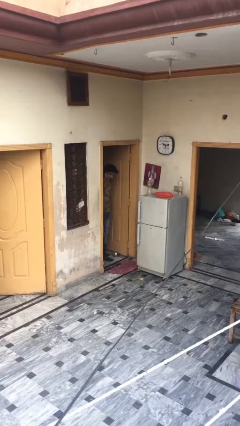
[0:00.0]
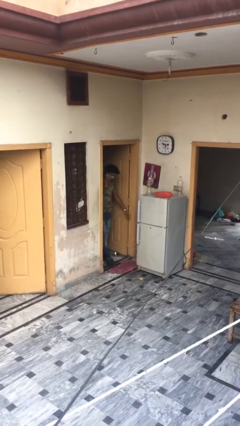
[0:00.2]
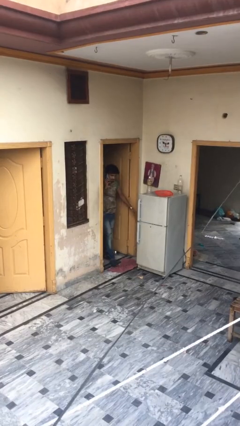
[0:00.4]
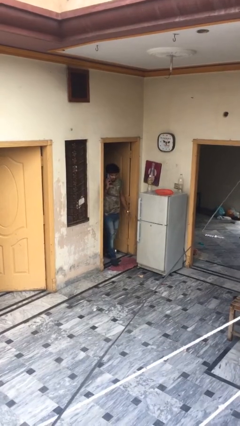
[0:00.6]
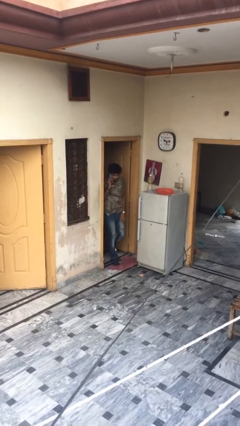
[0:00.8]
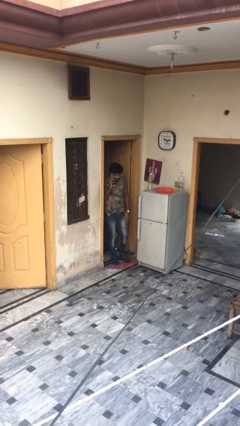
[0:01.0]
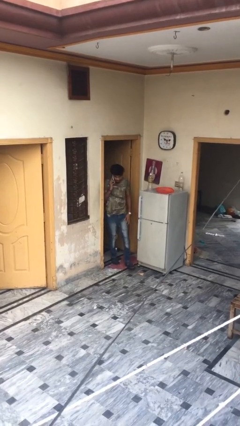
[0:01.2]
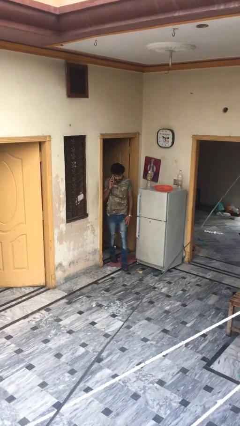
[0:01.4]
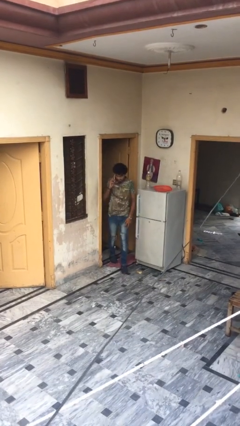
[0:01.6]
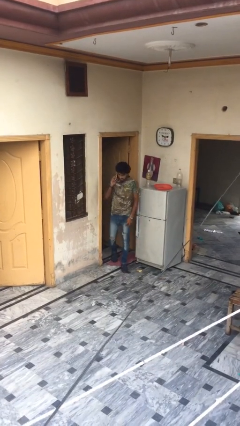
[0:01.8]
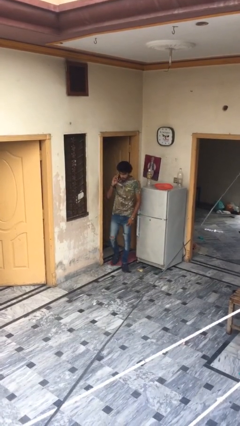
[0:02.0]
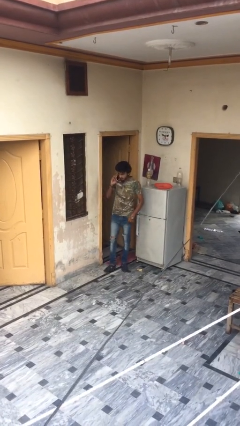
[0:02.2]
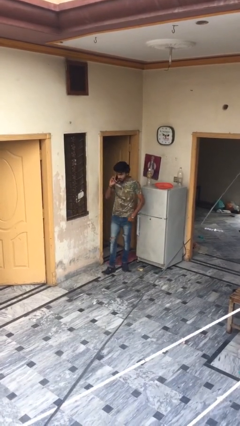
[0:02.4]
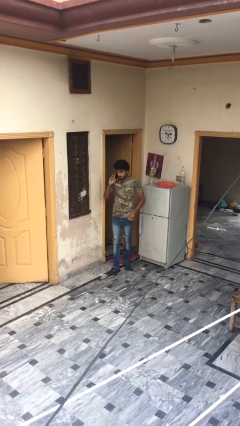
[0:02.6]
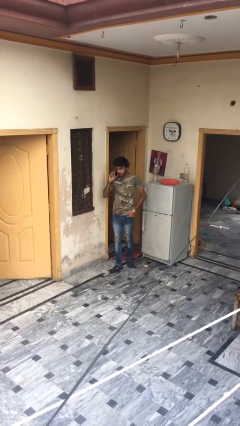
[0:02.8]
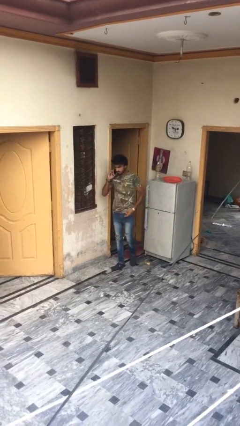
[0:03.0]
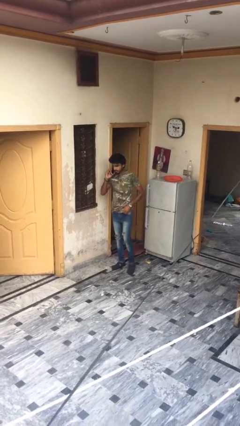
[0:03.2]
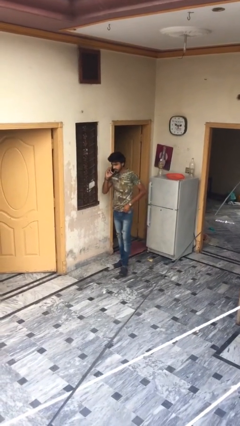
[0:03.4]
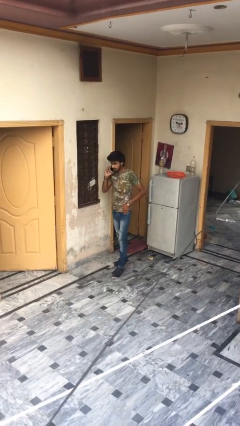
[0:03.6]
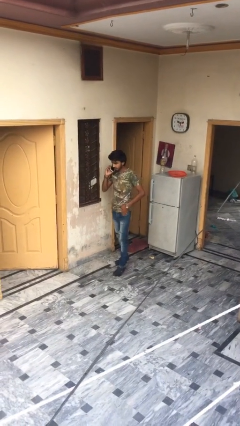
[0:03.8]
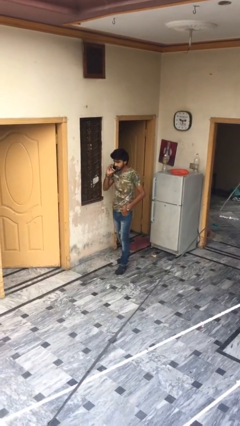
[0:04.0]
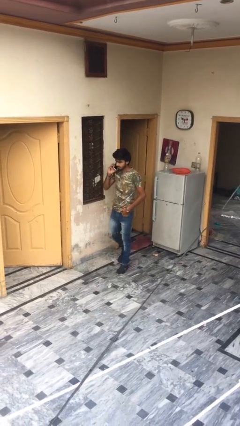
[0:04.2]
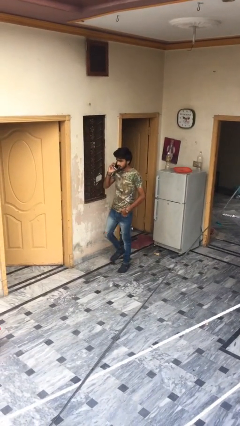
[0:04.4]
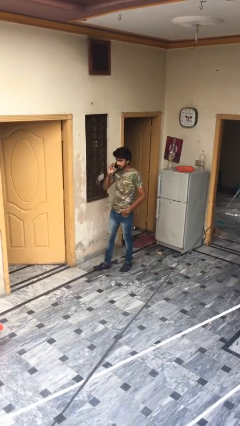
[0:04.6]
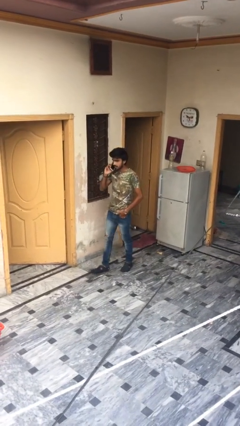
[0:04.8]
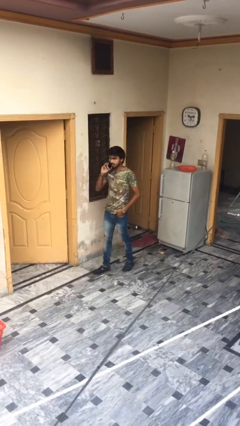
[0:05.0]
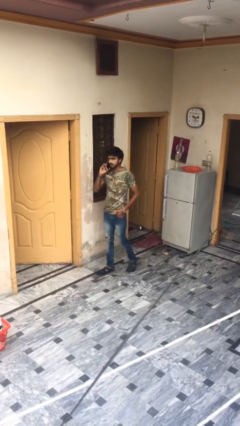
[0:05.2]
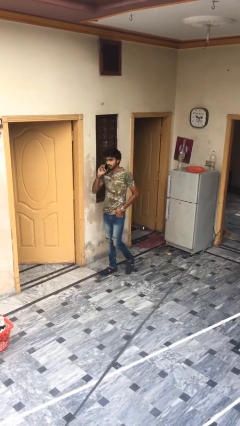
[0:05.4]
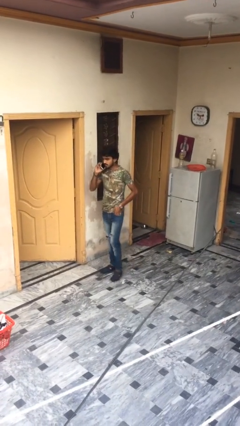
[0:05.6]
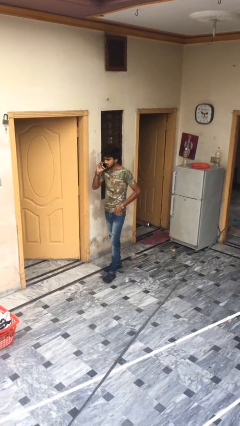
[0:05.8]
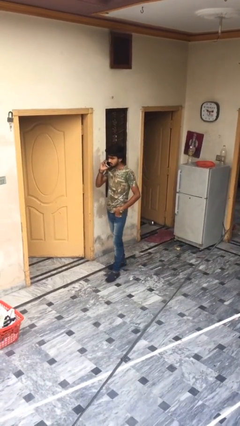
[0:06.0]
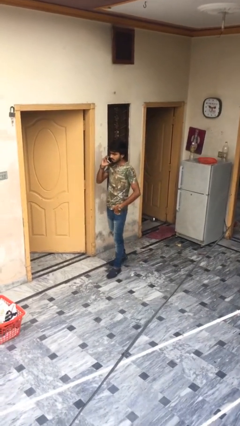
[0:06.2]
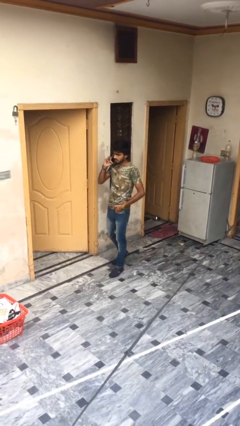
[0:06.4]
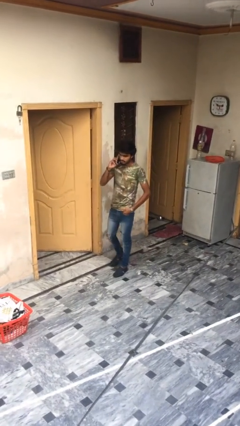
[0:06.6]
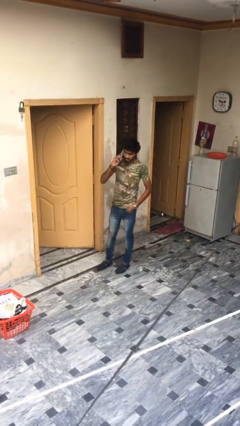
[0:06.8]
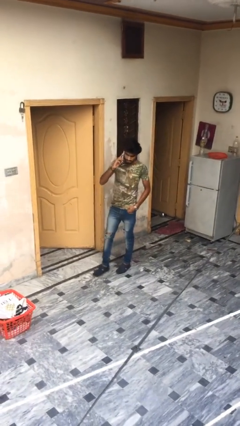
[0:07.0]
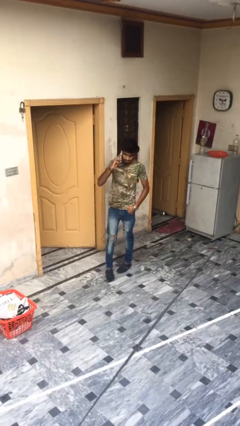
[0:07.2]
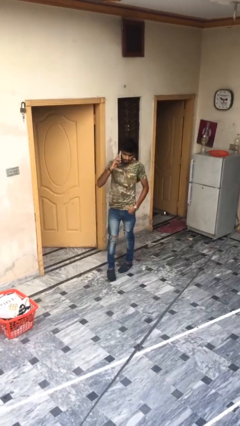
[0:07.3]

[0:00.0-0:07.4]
person enters scene through structure

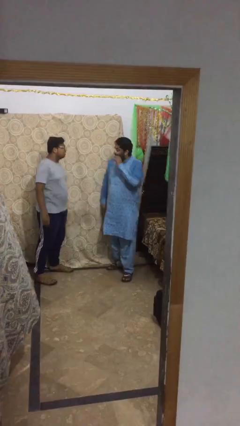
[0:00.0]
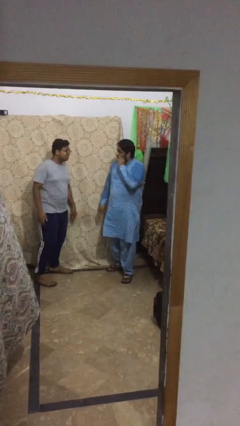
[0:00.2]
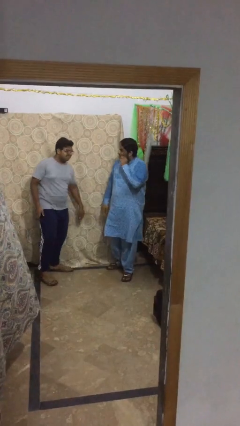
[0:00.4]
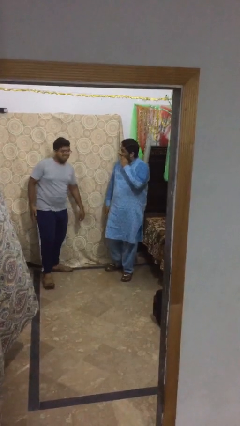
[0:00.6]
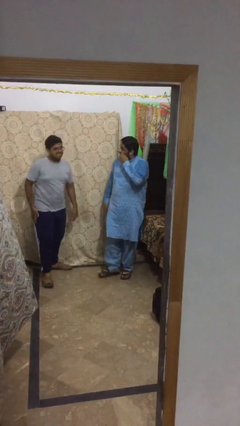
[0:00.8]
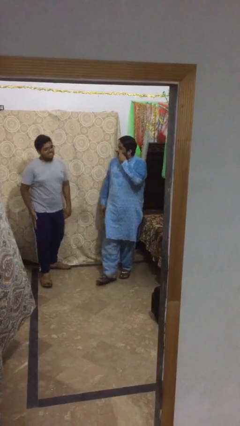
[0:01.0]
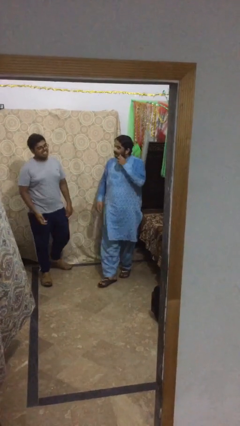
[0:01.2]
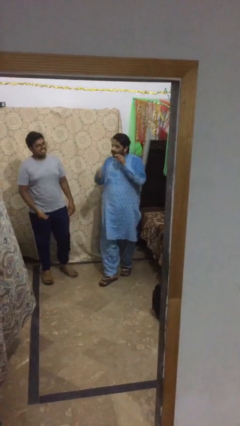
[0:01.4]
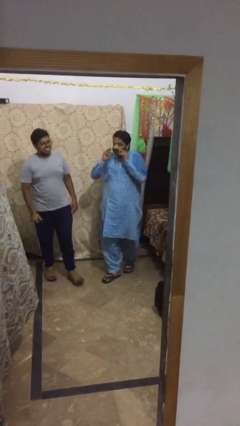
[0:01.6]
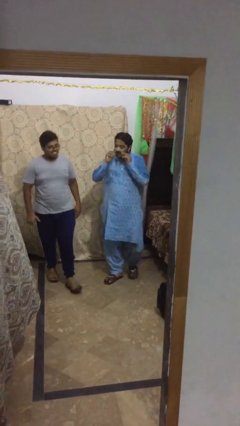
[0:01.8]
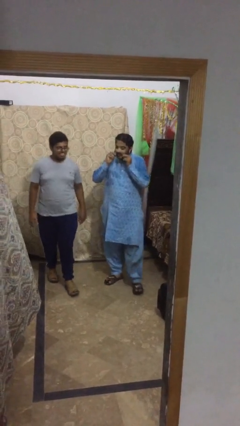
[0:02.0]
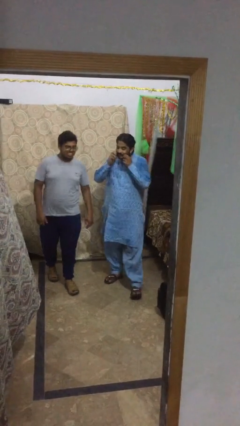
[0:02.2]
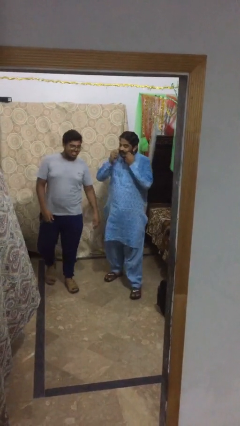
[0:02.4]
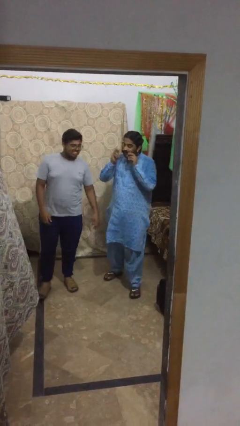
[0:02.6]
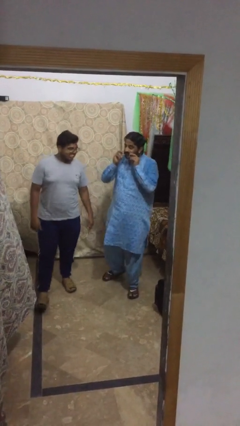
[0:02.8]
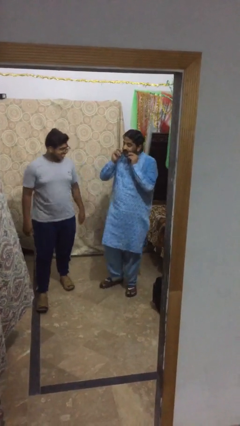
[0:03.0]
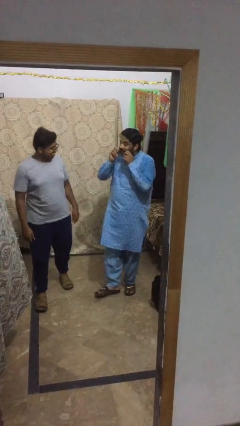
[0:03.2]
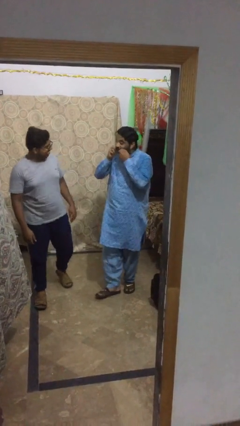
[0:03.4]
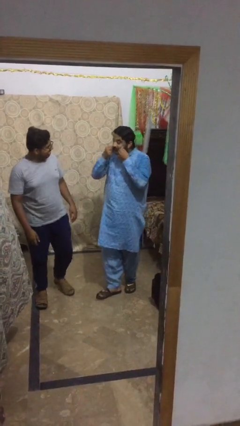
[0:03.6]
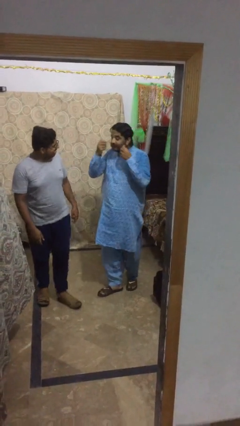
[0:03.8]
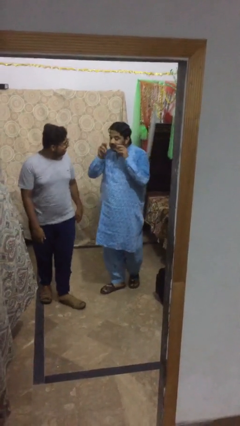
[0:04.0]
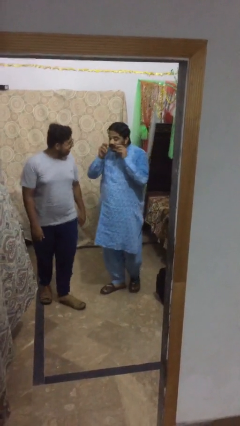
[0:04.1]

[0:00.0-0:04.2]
person talks to person

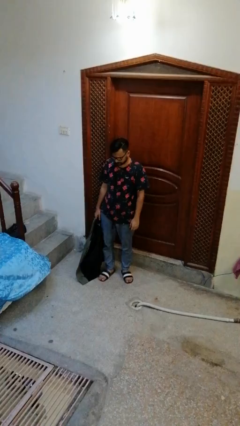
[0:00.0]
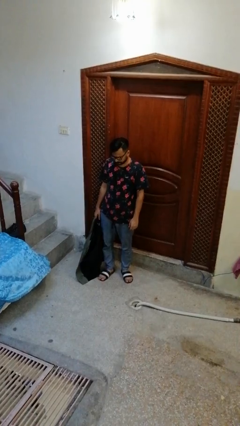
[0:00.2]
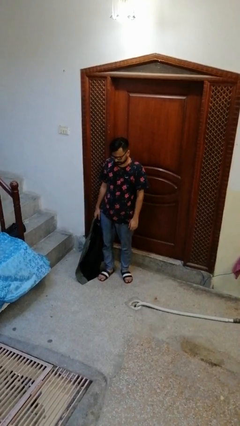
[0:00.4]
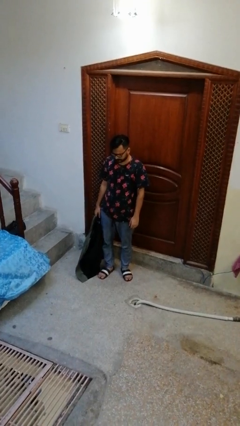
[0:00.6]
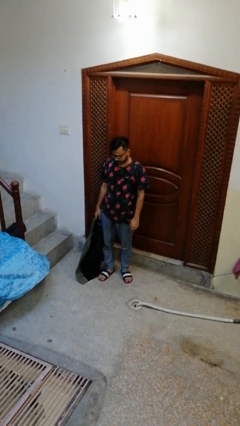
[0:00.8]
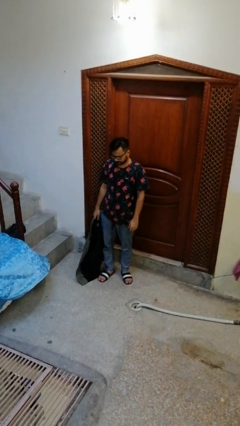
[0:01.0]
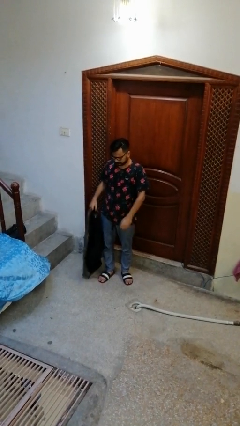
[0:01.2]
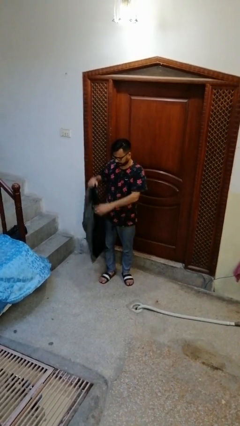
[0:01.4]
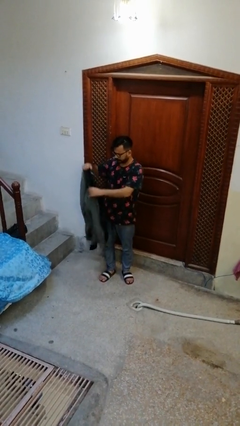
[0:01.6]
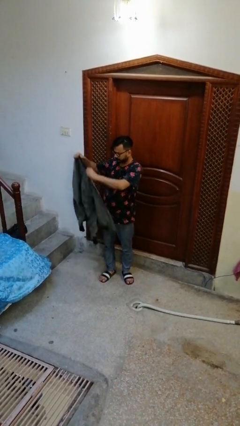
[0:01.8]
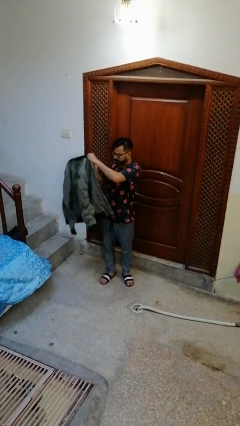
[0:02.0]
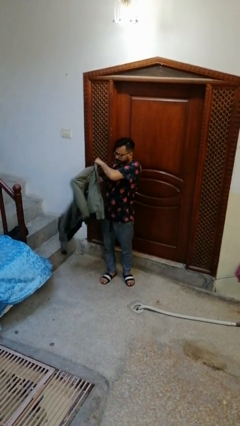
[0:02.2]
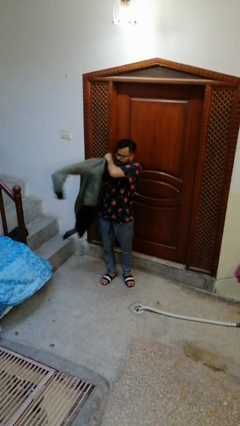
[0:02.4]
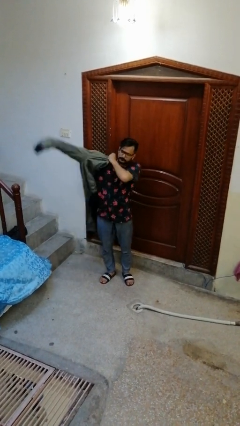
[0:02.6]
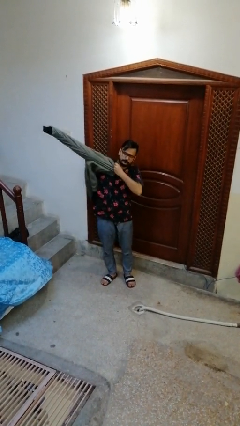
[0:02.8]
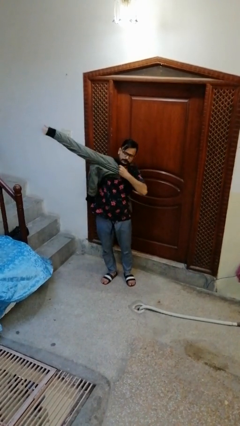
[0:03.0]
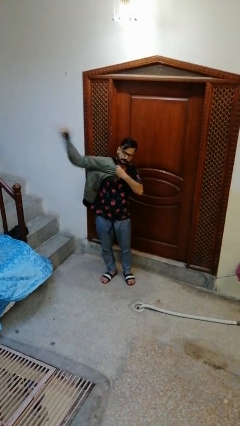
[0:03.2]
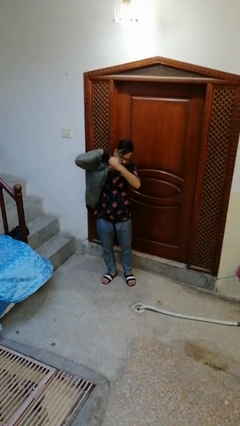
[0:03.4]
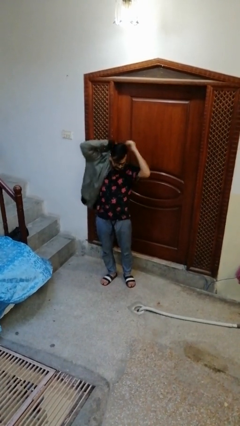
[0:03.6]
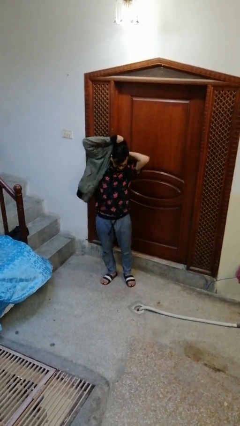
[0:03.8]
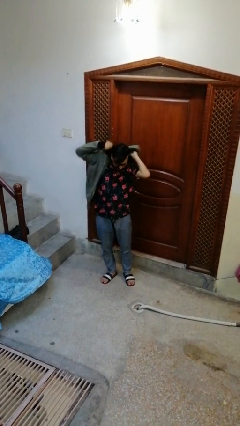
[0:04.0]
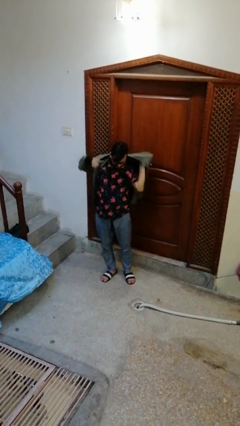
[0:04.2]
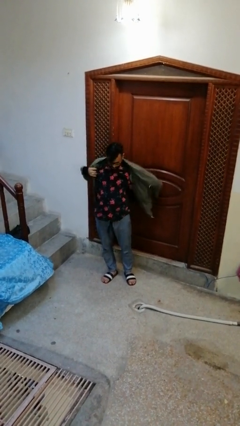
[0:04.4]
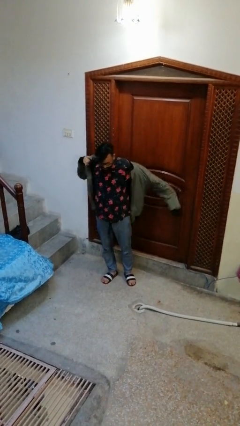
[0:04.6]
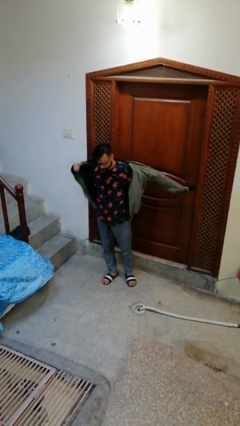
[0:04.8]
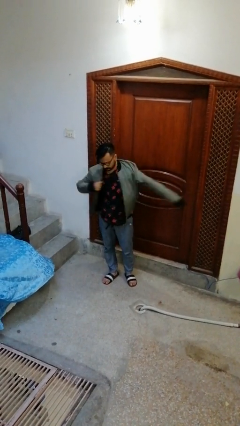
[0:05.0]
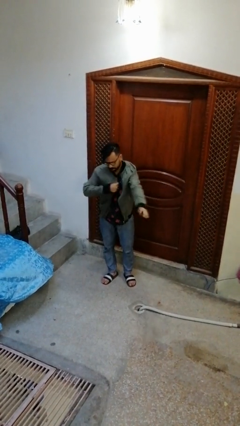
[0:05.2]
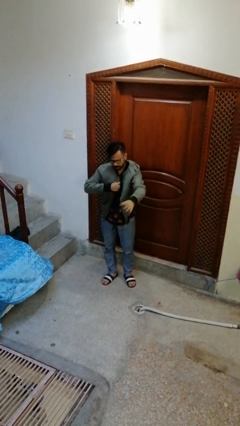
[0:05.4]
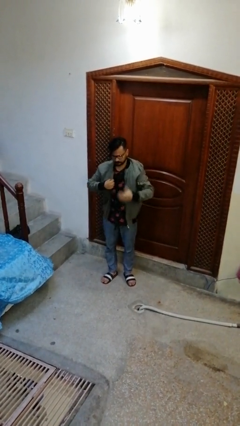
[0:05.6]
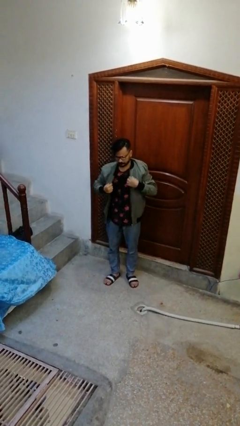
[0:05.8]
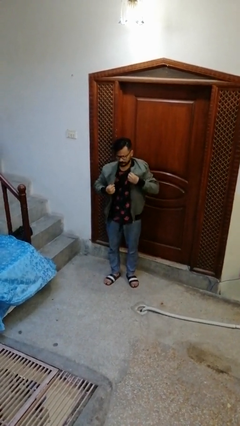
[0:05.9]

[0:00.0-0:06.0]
person puts on jacket
